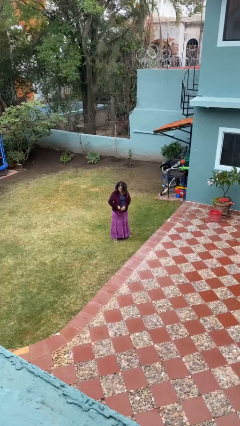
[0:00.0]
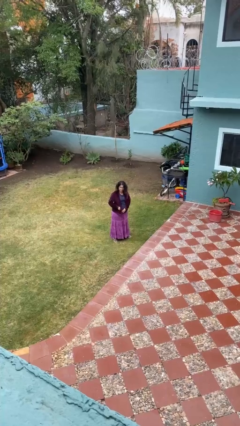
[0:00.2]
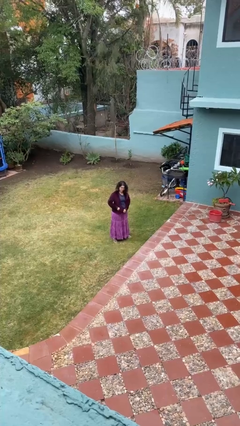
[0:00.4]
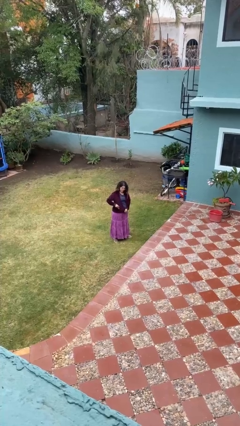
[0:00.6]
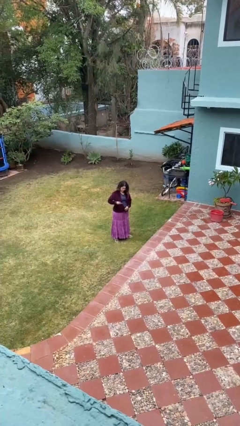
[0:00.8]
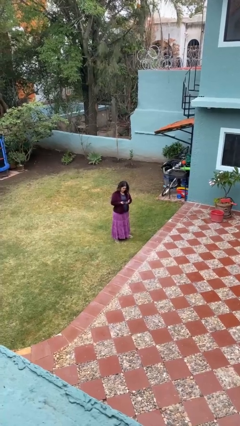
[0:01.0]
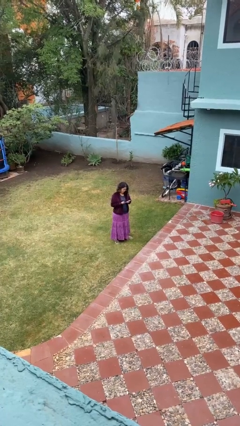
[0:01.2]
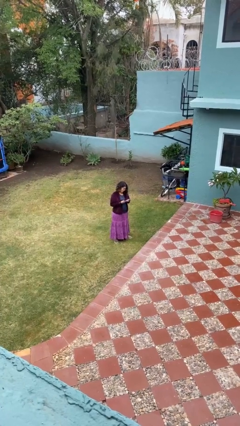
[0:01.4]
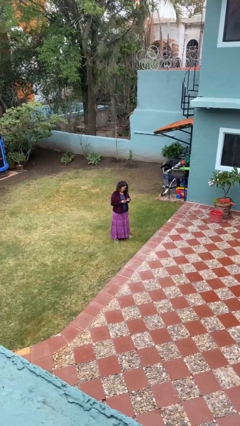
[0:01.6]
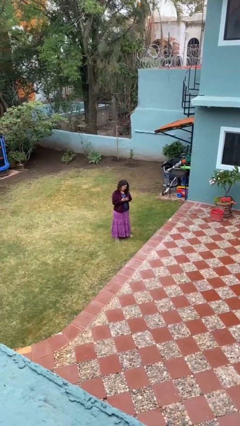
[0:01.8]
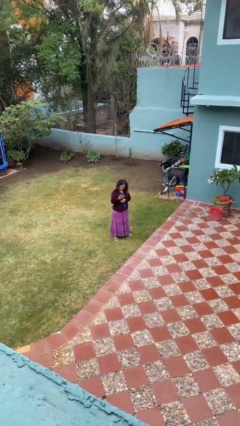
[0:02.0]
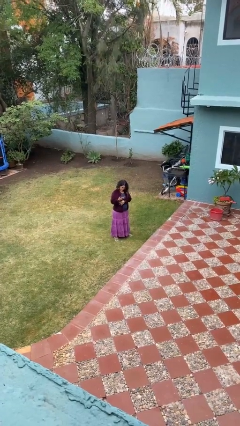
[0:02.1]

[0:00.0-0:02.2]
person takes phone from pocket

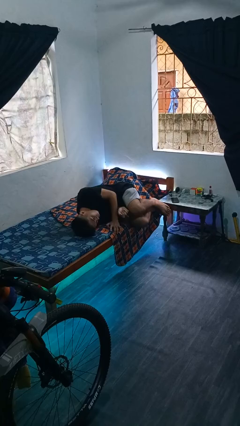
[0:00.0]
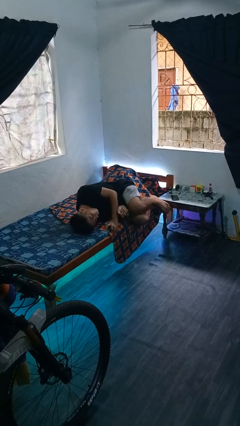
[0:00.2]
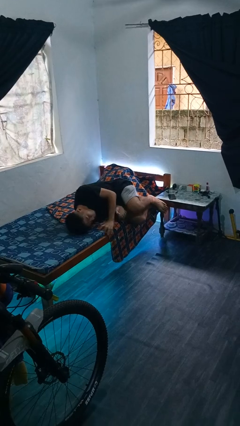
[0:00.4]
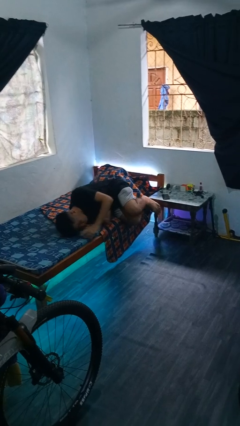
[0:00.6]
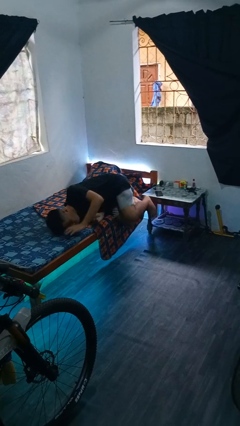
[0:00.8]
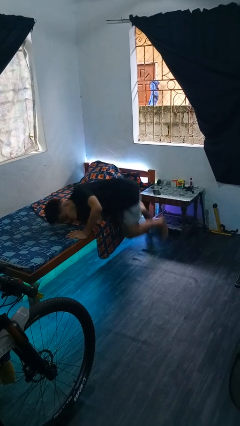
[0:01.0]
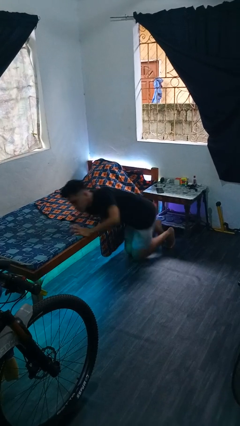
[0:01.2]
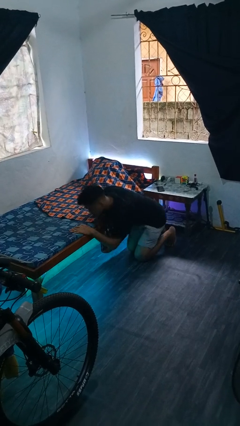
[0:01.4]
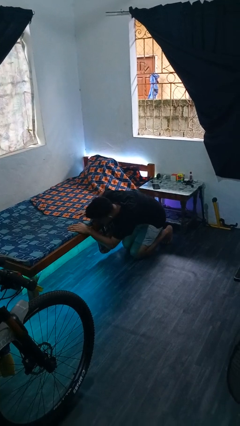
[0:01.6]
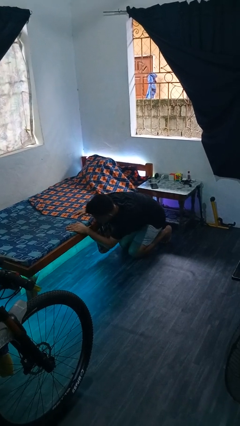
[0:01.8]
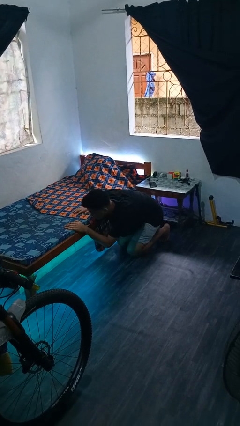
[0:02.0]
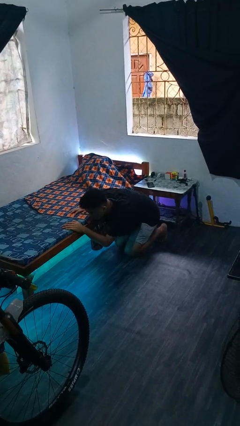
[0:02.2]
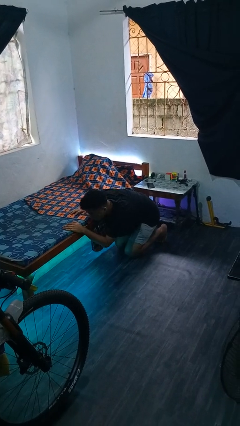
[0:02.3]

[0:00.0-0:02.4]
person falls from bed

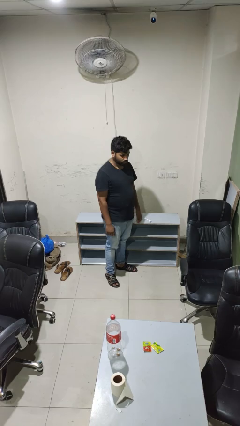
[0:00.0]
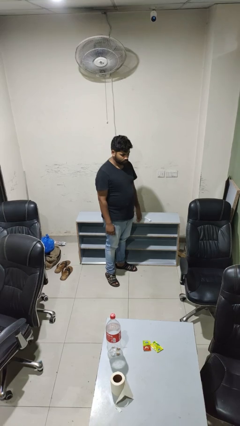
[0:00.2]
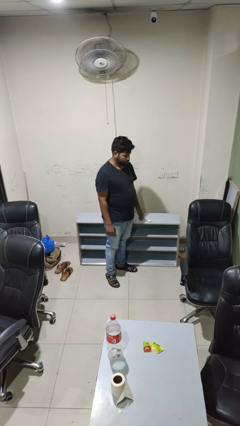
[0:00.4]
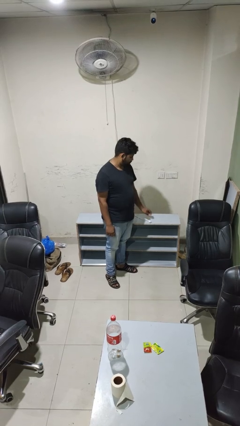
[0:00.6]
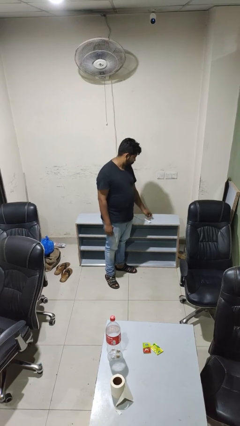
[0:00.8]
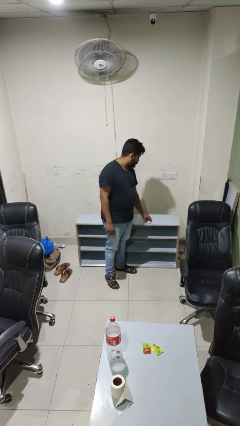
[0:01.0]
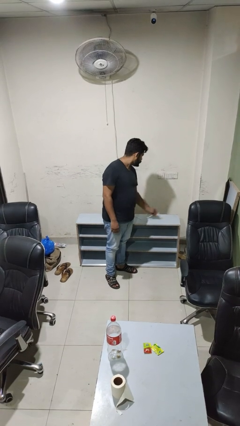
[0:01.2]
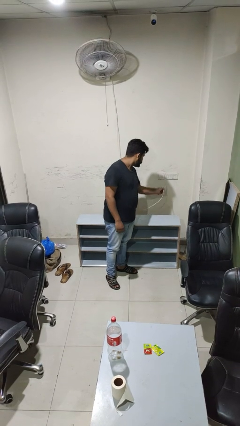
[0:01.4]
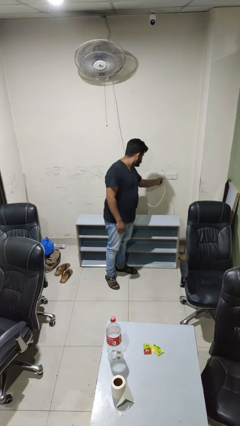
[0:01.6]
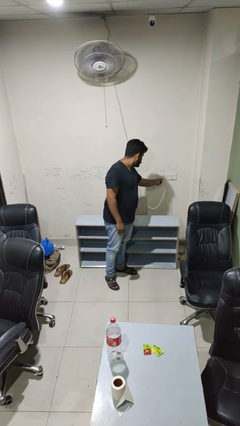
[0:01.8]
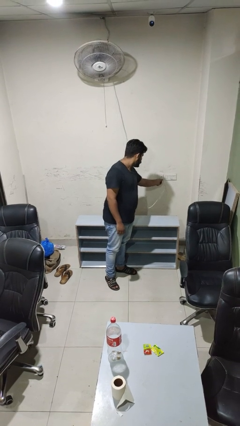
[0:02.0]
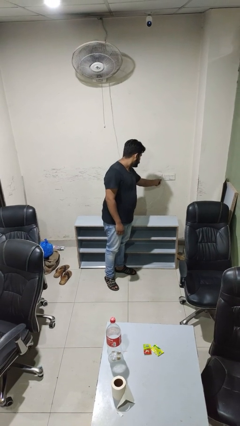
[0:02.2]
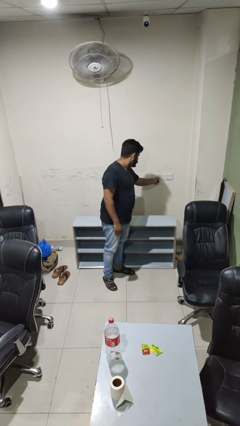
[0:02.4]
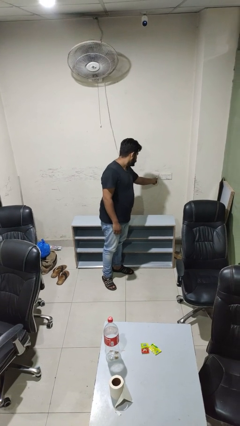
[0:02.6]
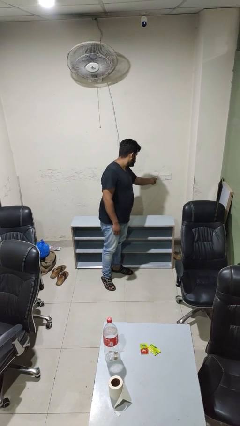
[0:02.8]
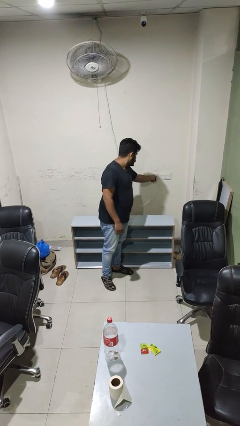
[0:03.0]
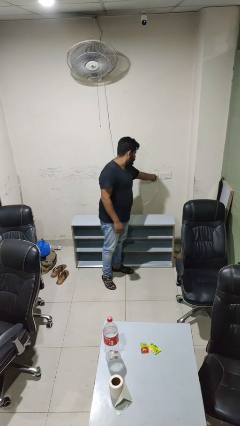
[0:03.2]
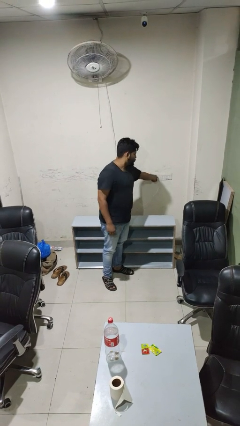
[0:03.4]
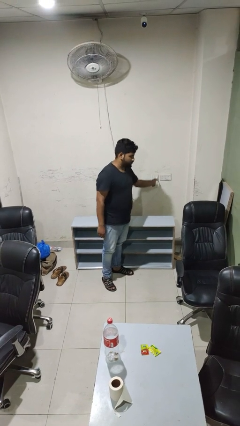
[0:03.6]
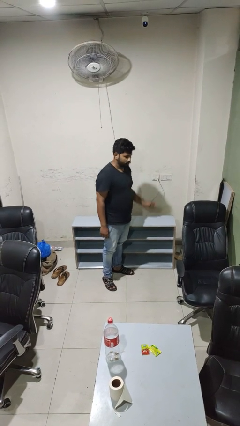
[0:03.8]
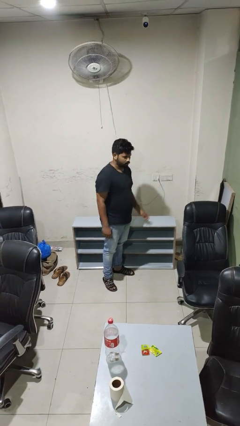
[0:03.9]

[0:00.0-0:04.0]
person plugs into electrical socket

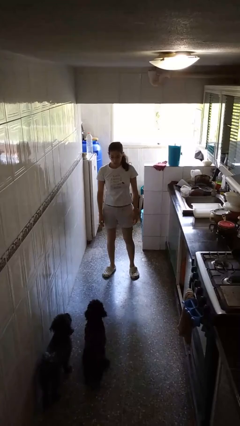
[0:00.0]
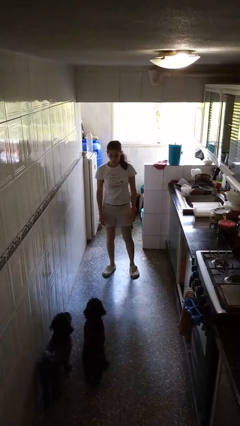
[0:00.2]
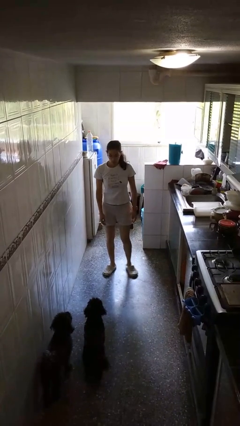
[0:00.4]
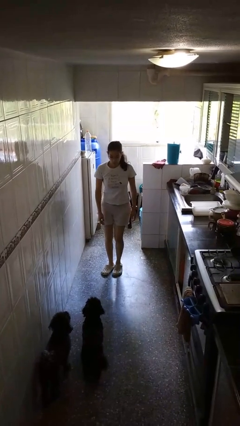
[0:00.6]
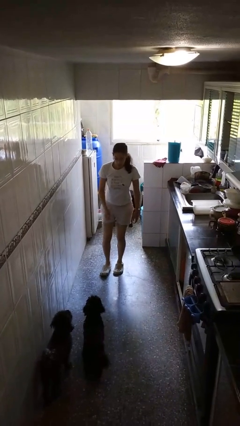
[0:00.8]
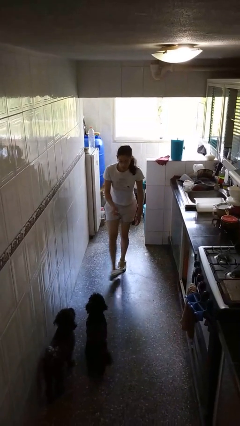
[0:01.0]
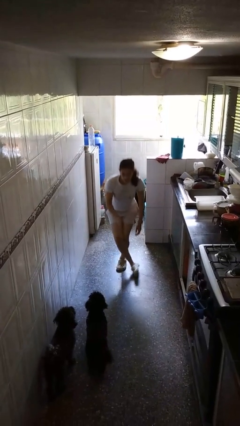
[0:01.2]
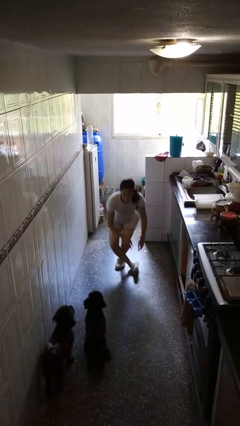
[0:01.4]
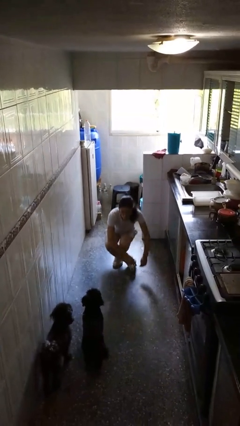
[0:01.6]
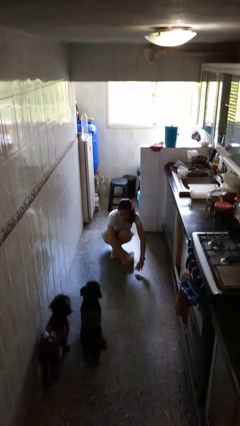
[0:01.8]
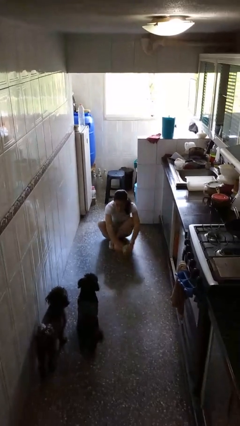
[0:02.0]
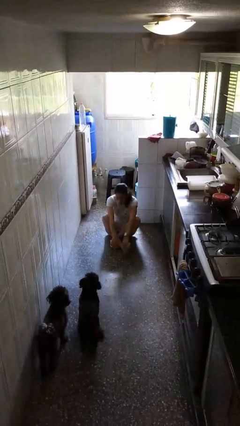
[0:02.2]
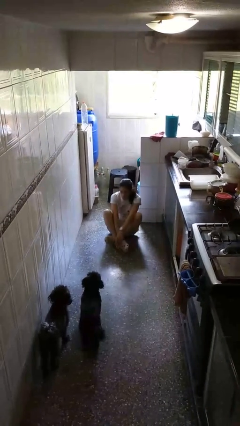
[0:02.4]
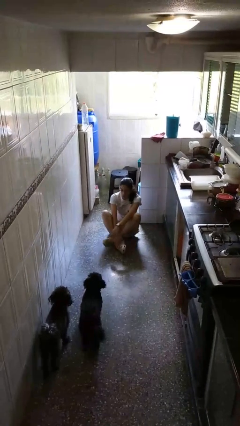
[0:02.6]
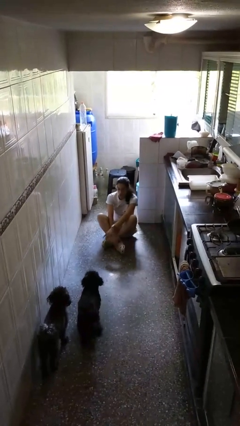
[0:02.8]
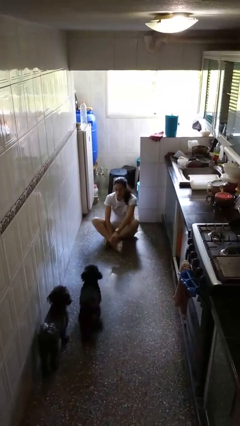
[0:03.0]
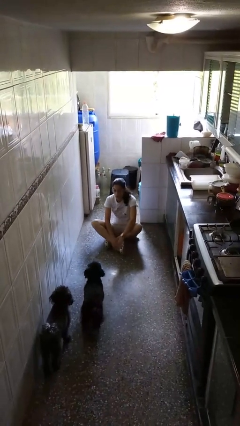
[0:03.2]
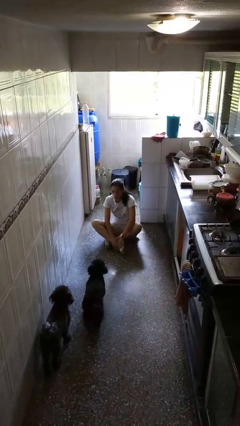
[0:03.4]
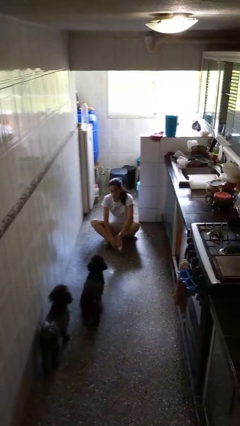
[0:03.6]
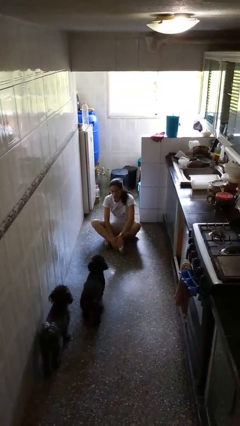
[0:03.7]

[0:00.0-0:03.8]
person sits crisscross

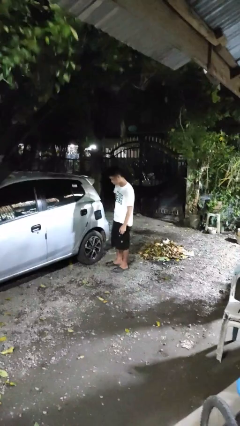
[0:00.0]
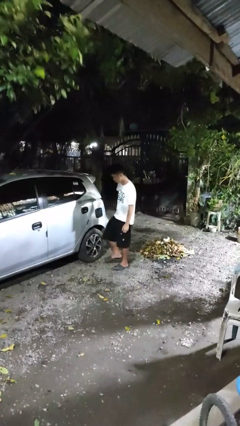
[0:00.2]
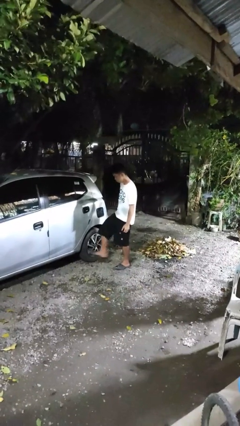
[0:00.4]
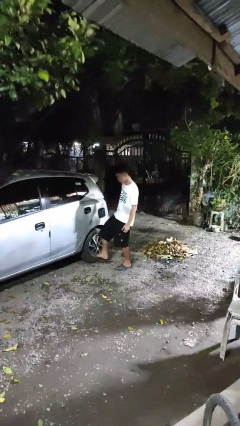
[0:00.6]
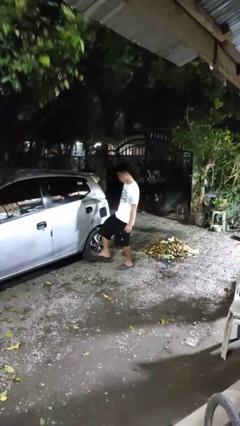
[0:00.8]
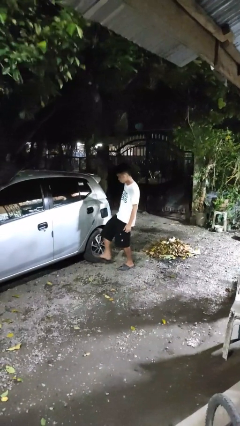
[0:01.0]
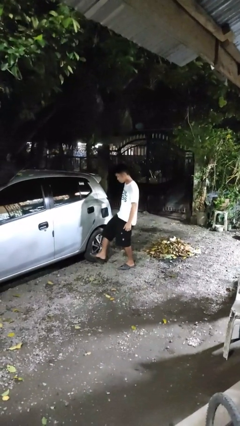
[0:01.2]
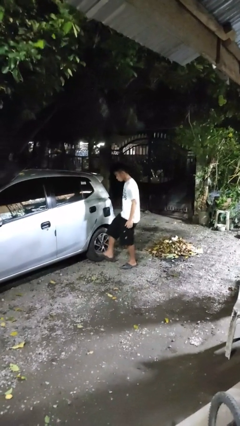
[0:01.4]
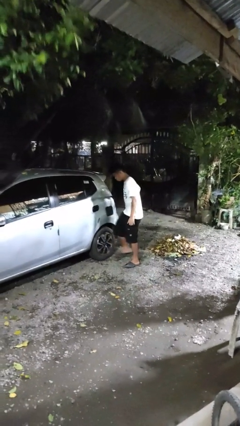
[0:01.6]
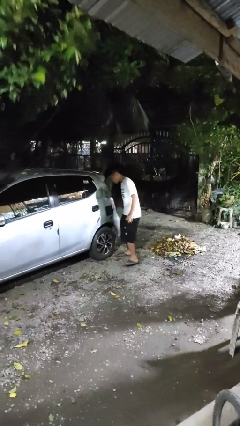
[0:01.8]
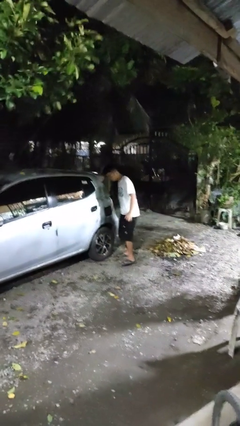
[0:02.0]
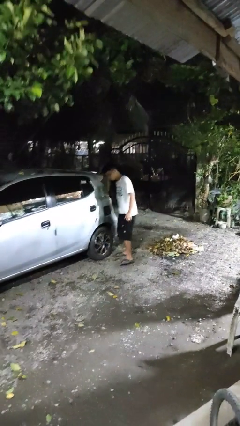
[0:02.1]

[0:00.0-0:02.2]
person kicks car tires

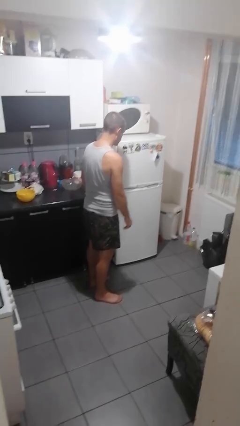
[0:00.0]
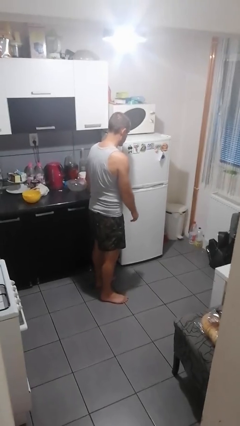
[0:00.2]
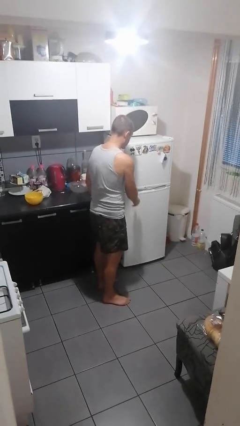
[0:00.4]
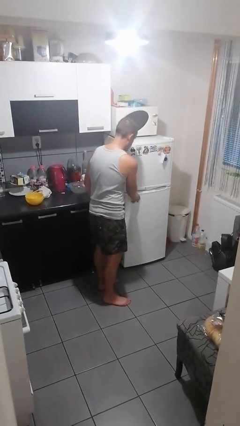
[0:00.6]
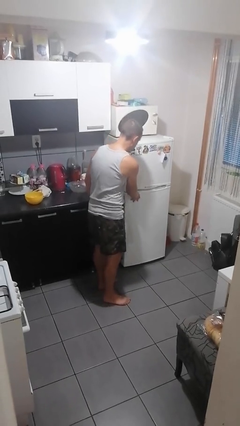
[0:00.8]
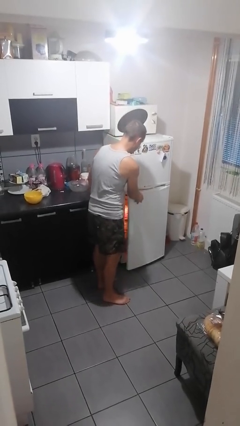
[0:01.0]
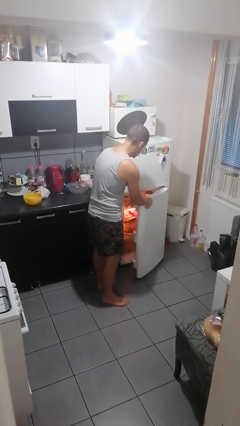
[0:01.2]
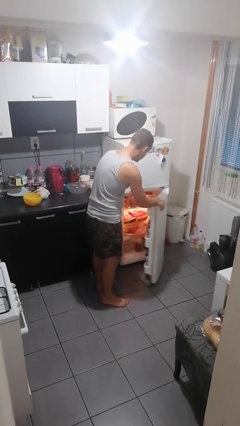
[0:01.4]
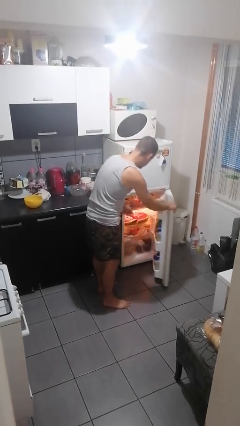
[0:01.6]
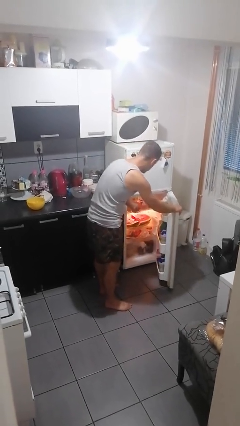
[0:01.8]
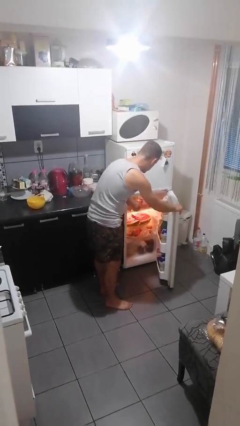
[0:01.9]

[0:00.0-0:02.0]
person opens refrigerator

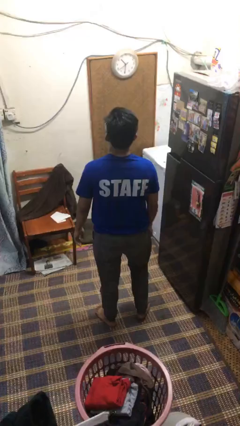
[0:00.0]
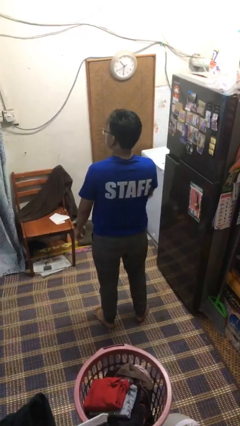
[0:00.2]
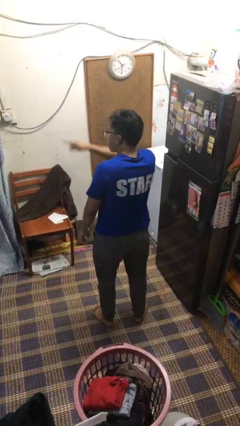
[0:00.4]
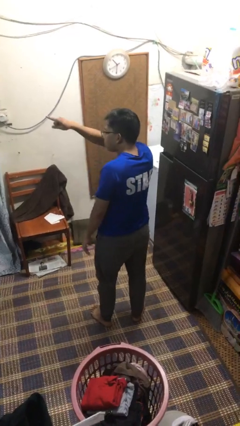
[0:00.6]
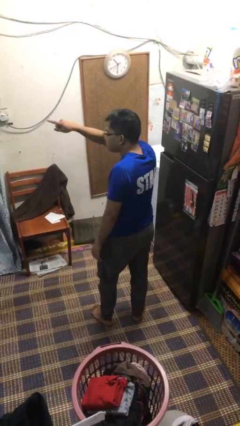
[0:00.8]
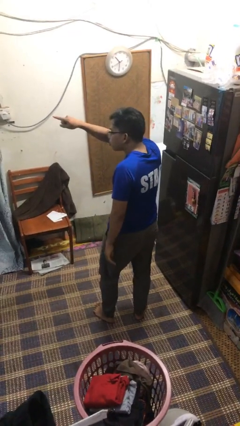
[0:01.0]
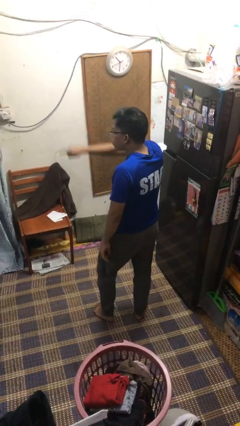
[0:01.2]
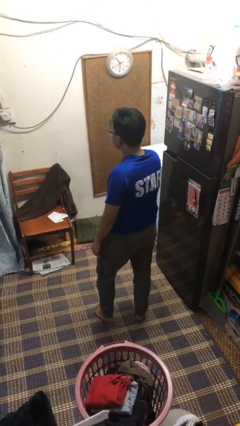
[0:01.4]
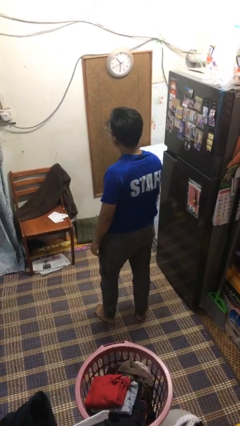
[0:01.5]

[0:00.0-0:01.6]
person points at person
